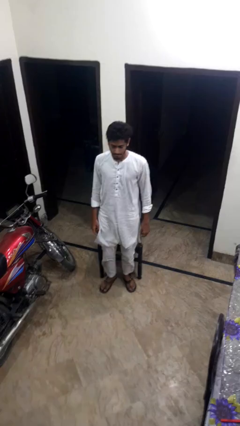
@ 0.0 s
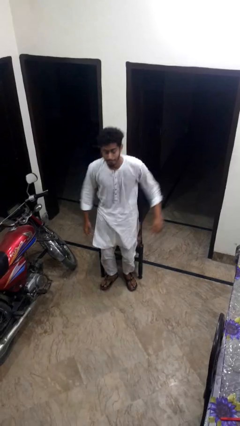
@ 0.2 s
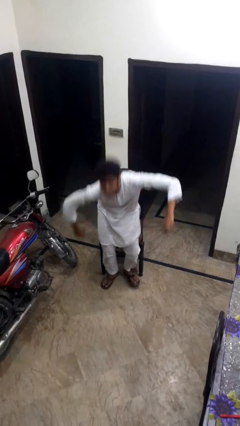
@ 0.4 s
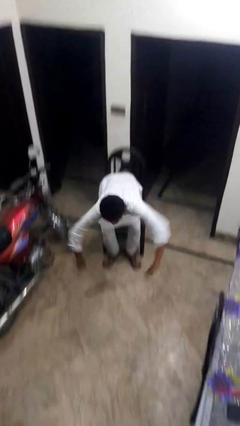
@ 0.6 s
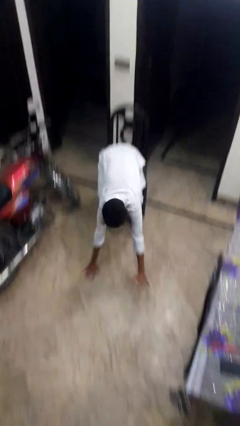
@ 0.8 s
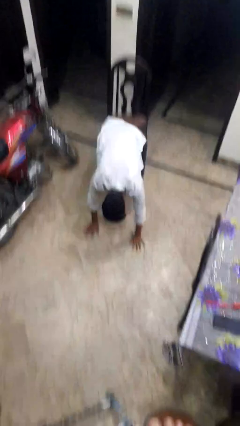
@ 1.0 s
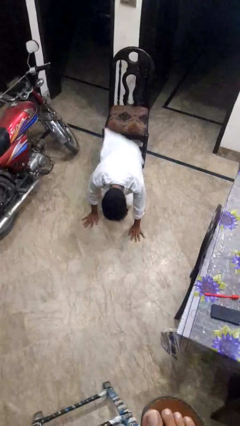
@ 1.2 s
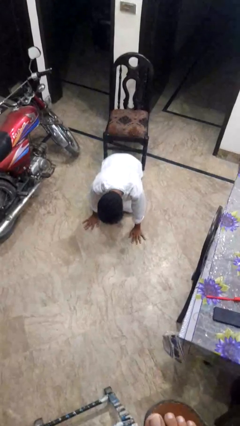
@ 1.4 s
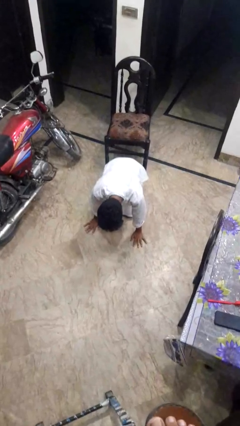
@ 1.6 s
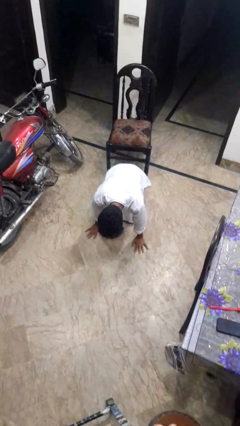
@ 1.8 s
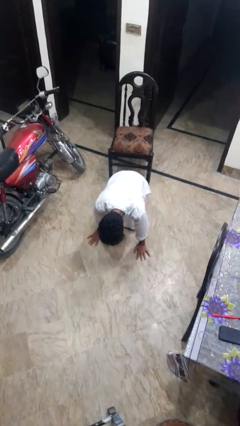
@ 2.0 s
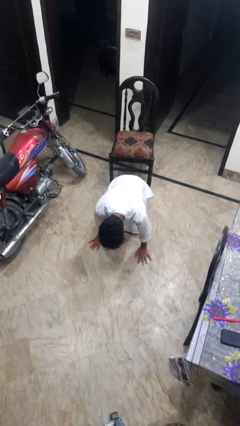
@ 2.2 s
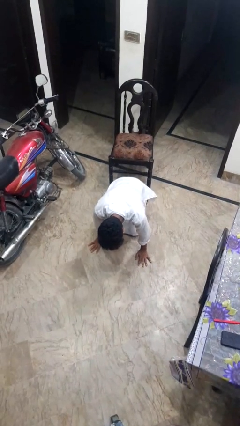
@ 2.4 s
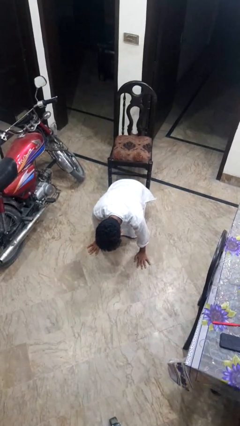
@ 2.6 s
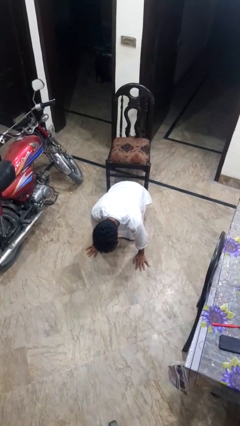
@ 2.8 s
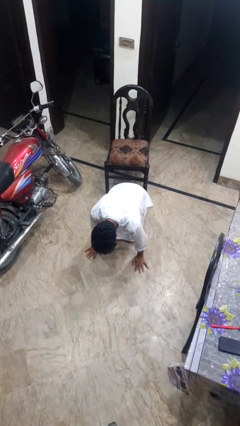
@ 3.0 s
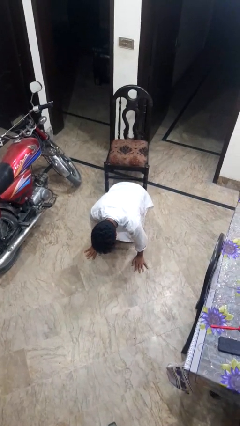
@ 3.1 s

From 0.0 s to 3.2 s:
person falls from chair

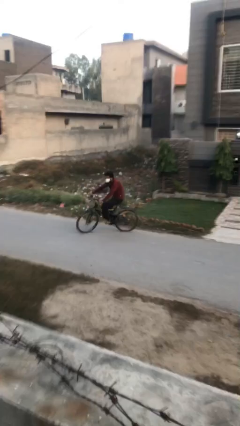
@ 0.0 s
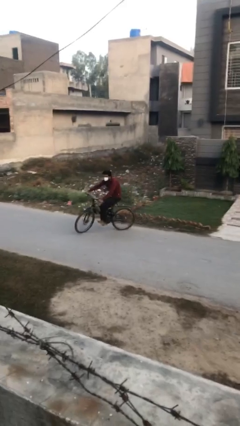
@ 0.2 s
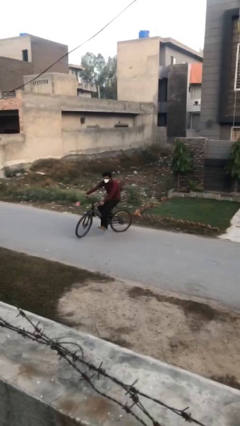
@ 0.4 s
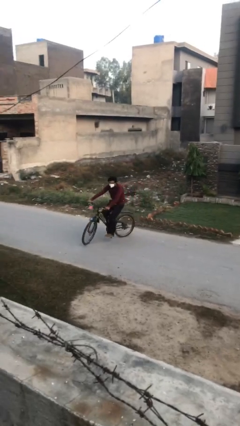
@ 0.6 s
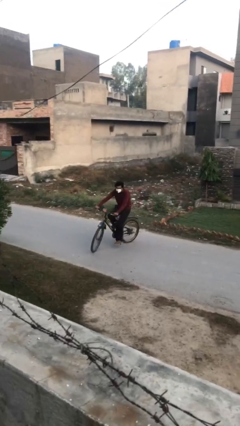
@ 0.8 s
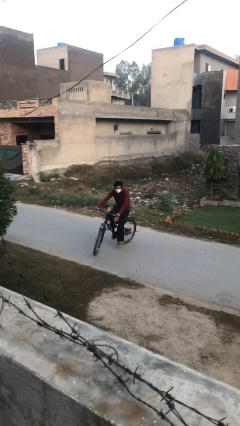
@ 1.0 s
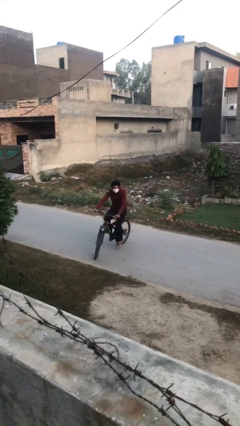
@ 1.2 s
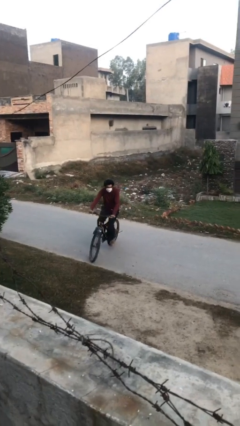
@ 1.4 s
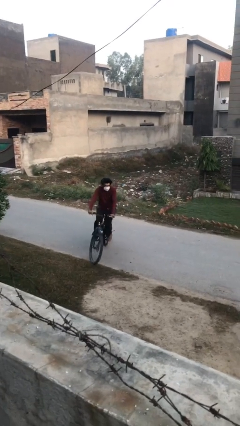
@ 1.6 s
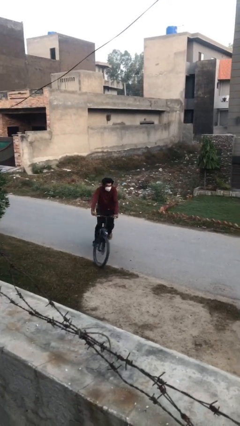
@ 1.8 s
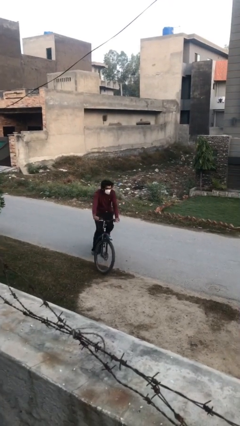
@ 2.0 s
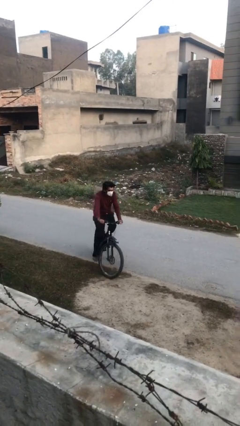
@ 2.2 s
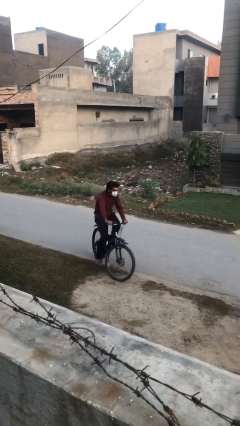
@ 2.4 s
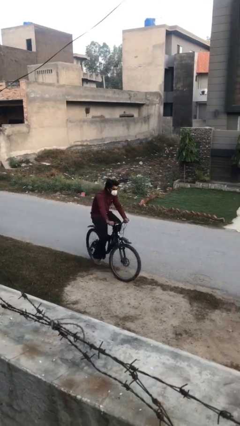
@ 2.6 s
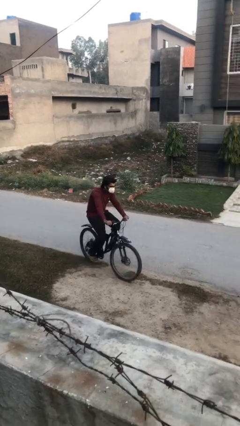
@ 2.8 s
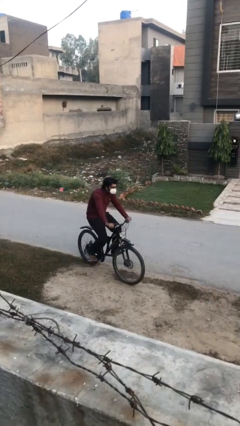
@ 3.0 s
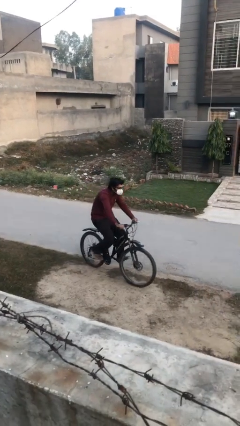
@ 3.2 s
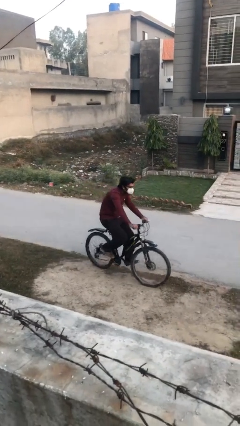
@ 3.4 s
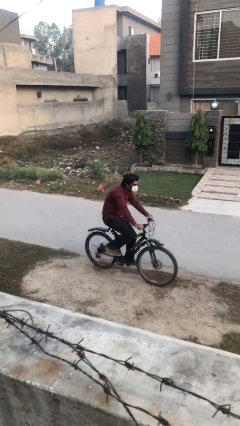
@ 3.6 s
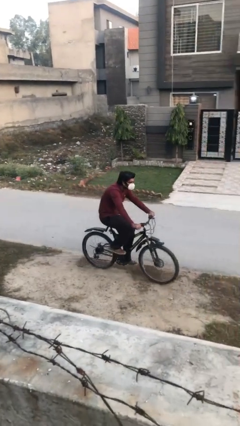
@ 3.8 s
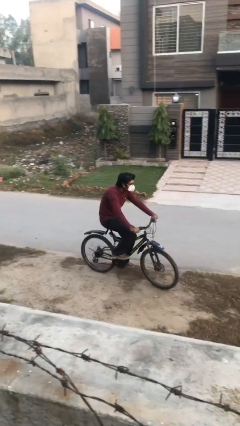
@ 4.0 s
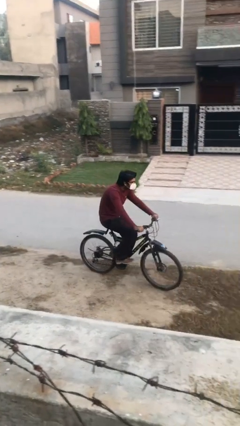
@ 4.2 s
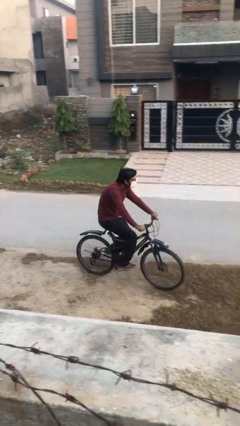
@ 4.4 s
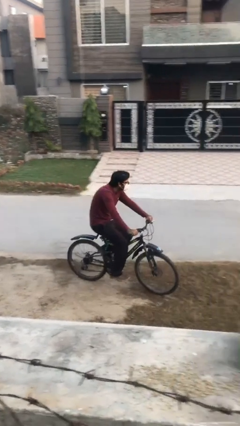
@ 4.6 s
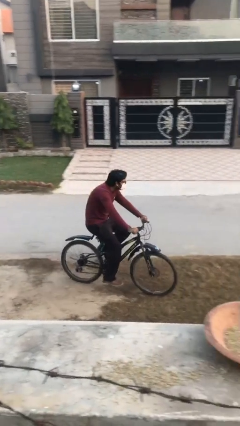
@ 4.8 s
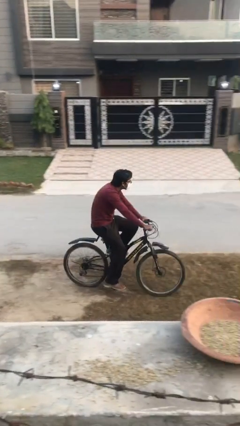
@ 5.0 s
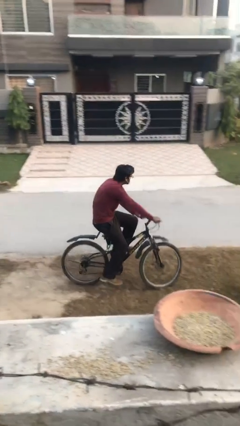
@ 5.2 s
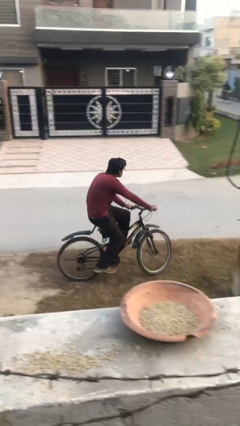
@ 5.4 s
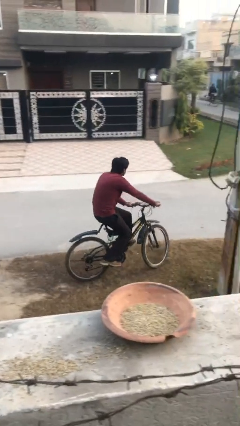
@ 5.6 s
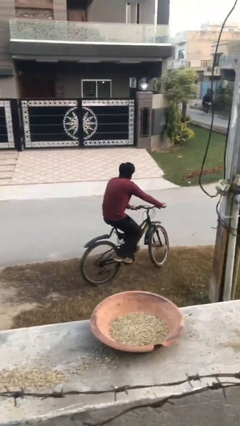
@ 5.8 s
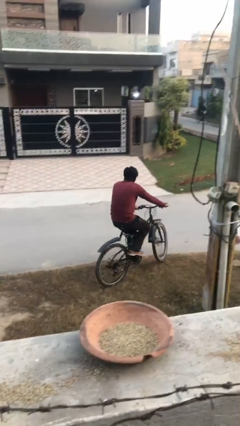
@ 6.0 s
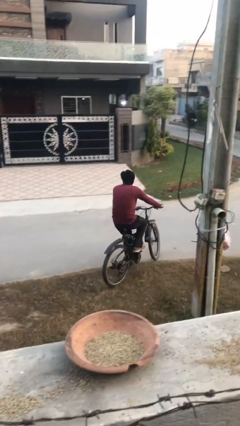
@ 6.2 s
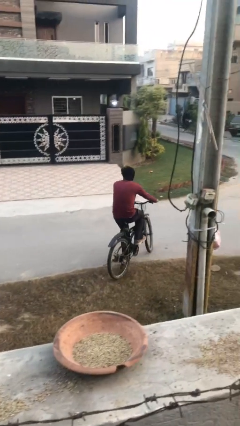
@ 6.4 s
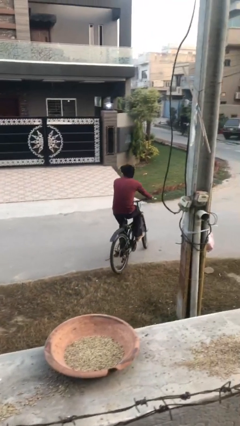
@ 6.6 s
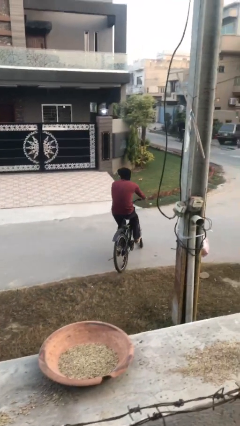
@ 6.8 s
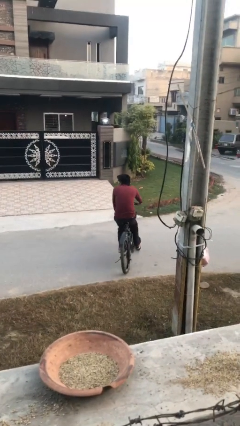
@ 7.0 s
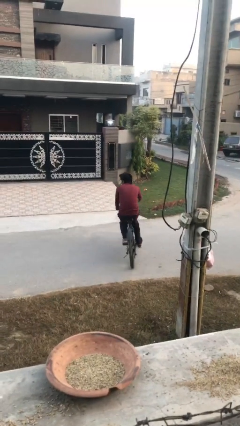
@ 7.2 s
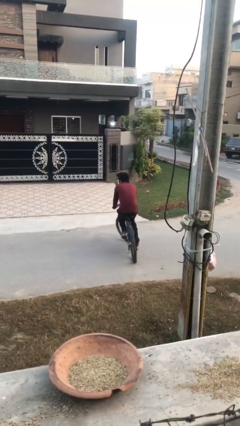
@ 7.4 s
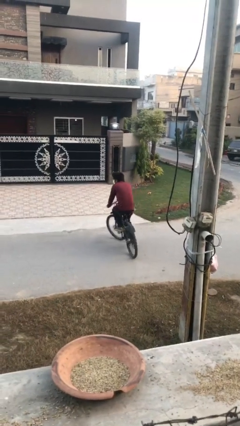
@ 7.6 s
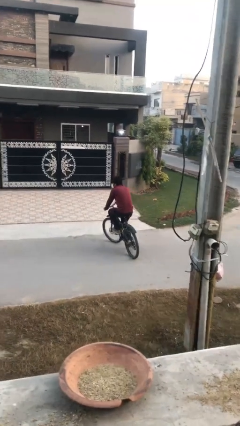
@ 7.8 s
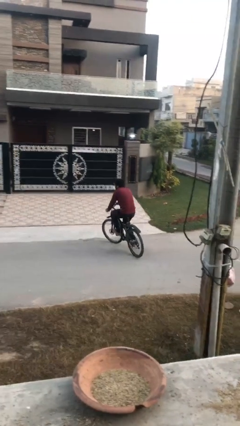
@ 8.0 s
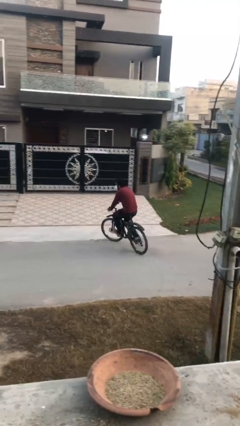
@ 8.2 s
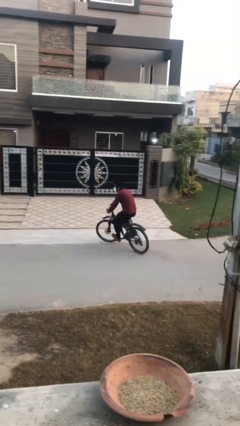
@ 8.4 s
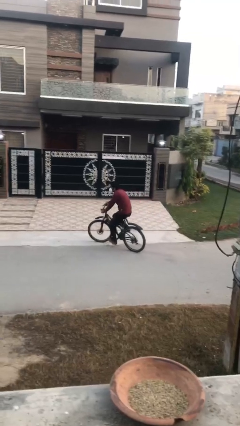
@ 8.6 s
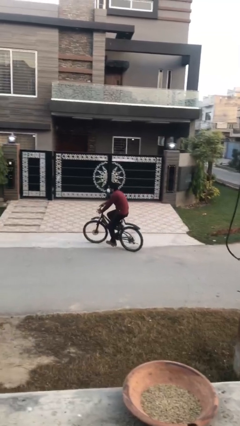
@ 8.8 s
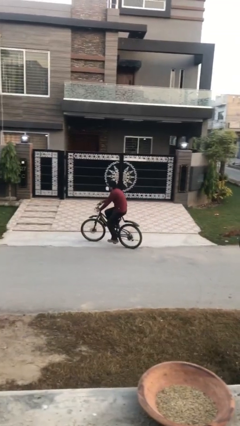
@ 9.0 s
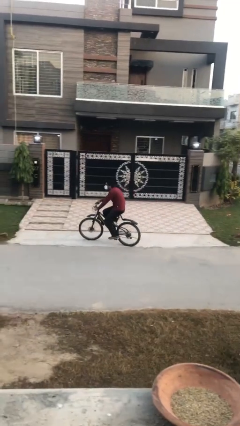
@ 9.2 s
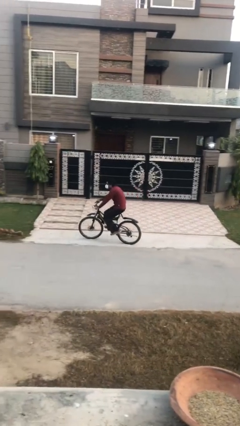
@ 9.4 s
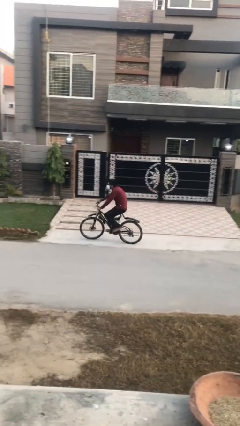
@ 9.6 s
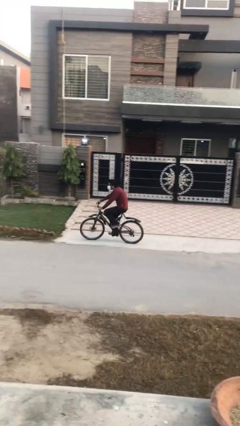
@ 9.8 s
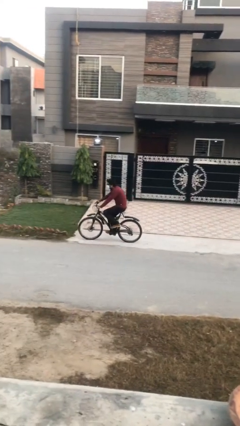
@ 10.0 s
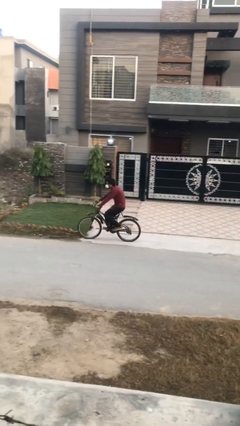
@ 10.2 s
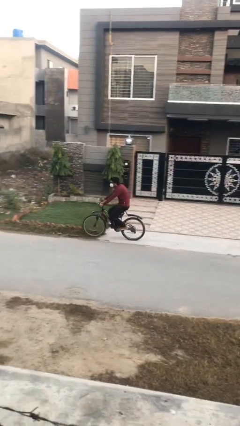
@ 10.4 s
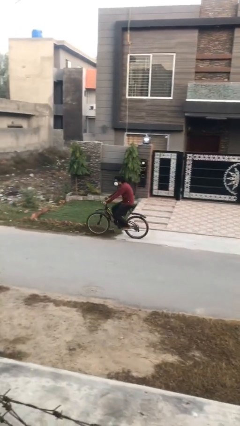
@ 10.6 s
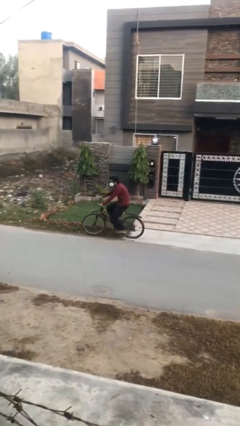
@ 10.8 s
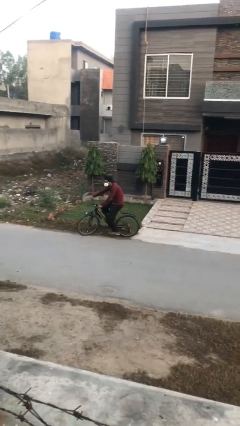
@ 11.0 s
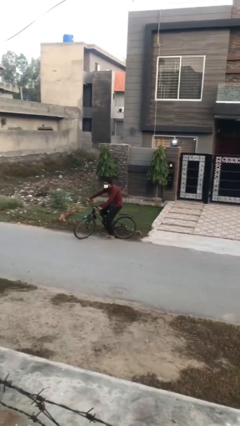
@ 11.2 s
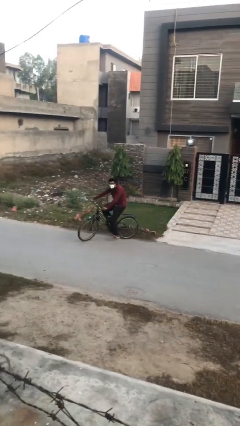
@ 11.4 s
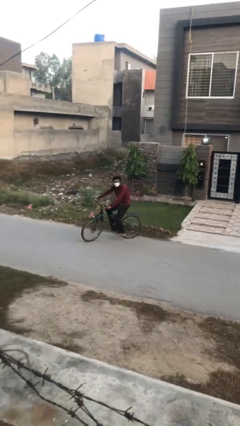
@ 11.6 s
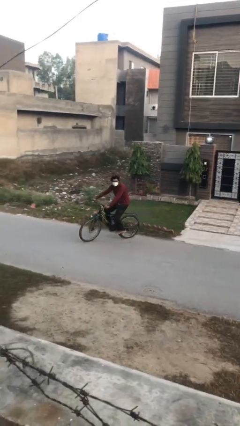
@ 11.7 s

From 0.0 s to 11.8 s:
person rides bicycle

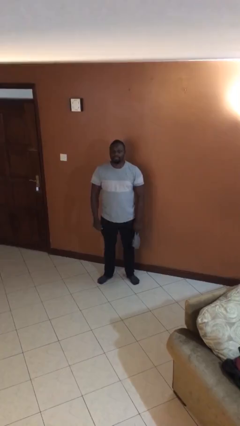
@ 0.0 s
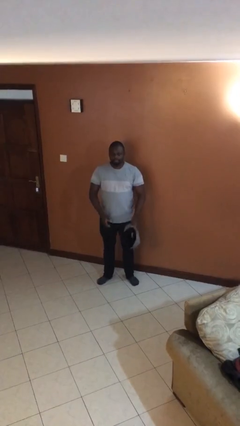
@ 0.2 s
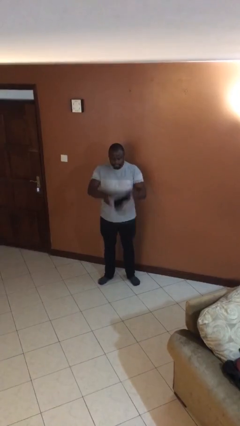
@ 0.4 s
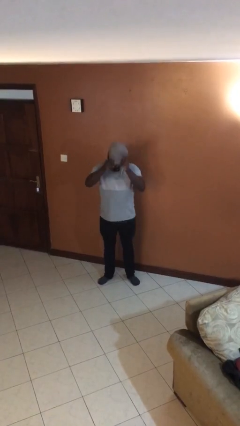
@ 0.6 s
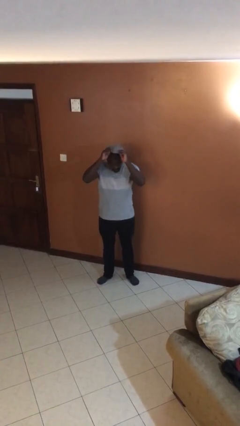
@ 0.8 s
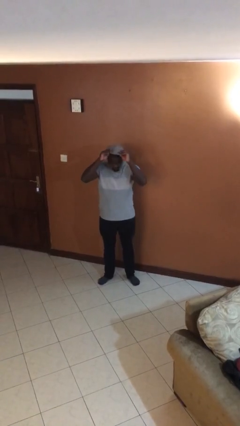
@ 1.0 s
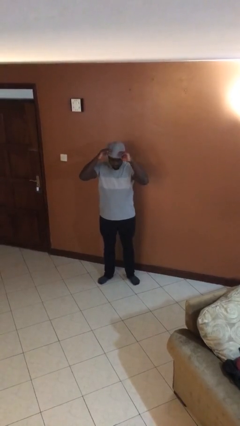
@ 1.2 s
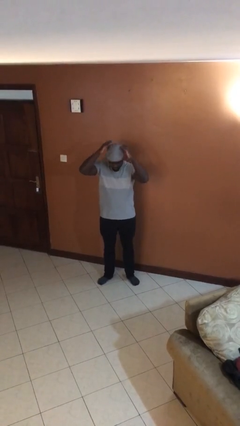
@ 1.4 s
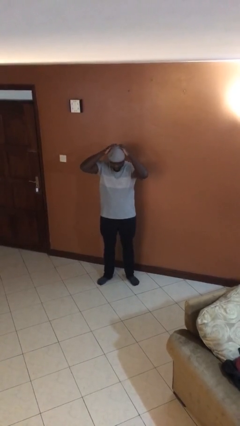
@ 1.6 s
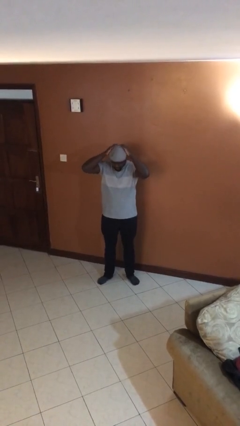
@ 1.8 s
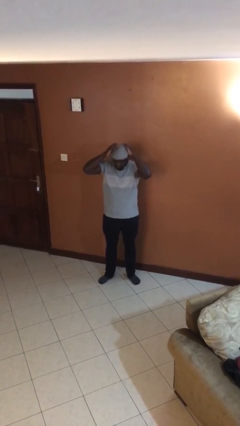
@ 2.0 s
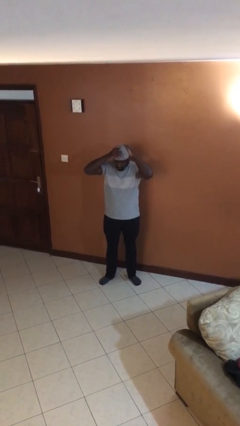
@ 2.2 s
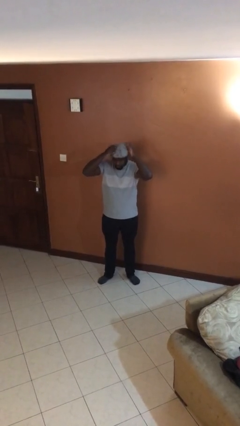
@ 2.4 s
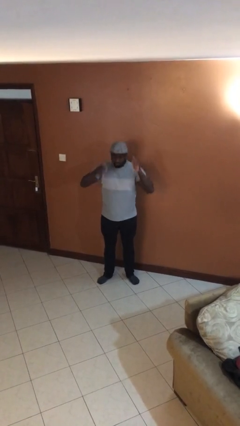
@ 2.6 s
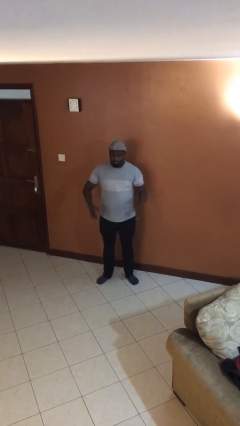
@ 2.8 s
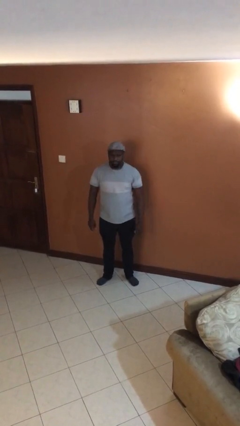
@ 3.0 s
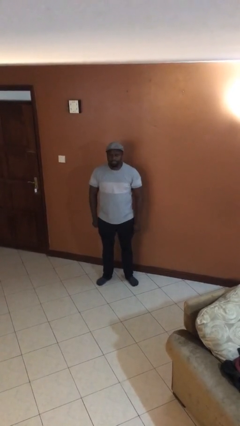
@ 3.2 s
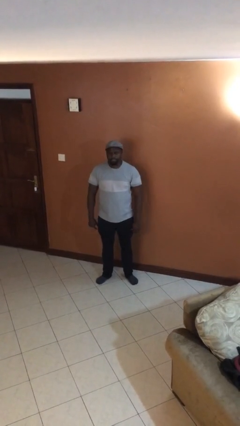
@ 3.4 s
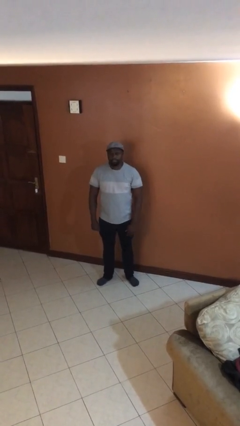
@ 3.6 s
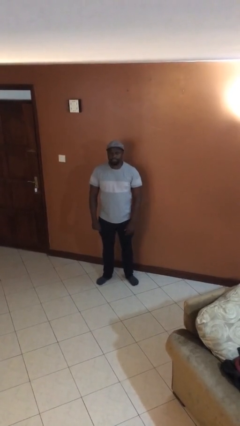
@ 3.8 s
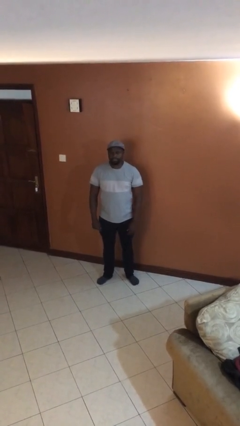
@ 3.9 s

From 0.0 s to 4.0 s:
person puts on hat
